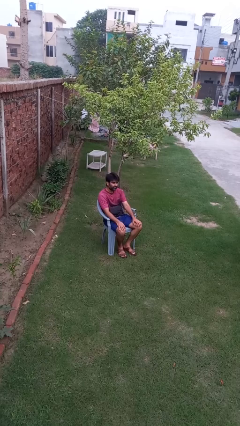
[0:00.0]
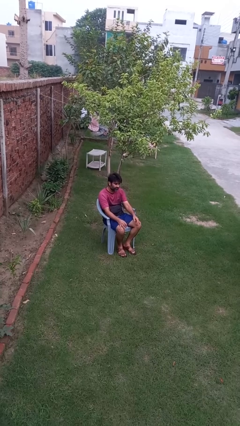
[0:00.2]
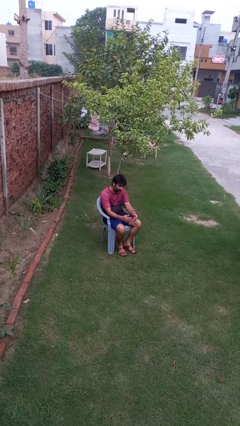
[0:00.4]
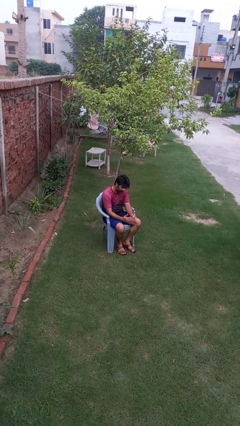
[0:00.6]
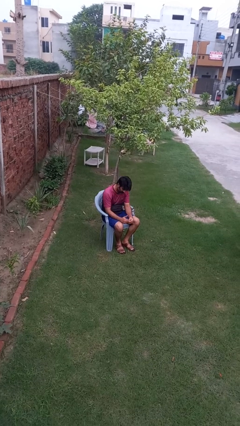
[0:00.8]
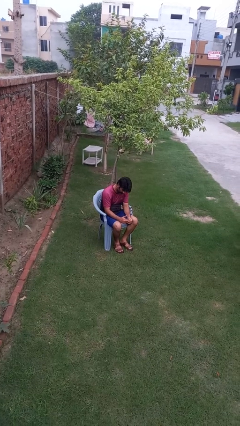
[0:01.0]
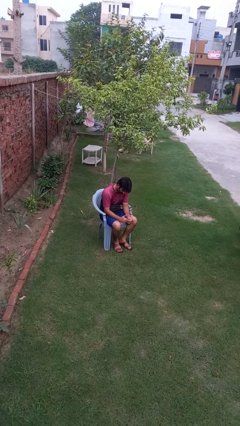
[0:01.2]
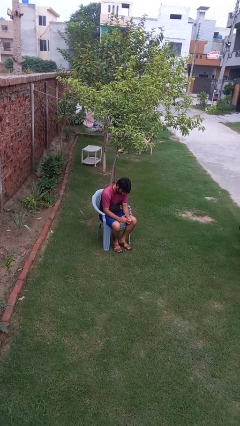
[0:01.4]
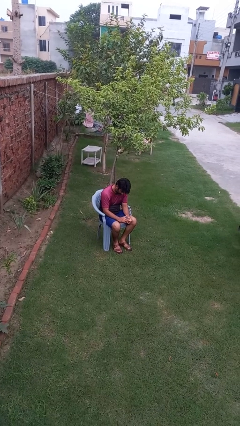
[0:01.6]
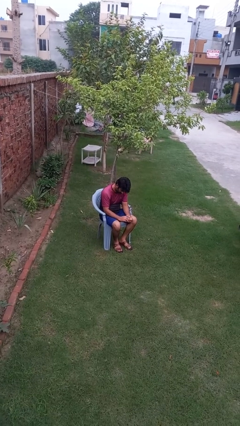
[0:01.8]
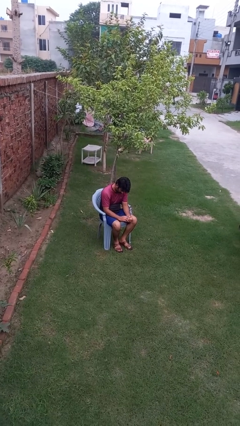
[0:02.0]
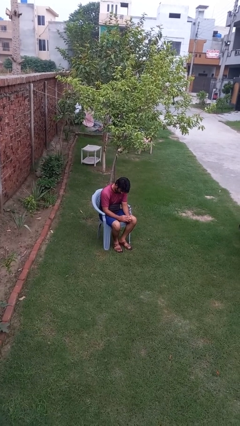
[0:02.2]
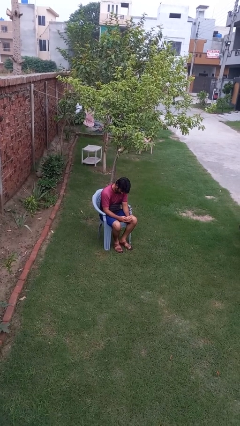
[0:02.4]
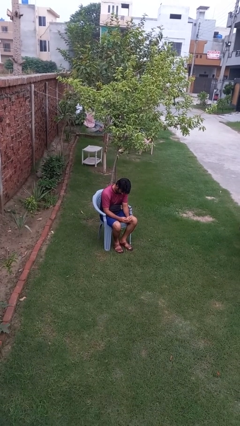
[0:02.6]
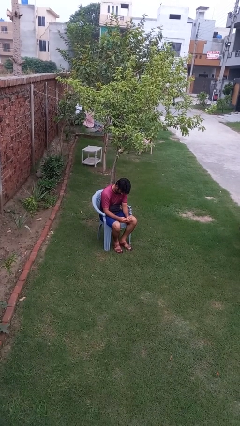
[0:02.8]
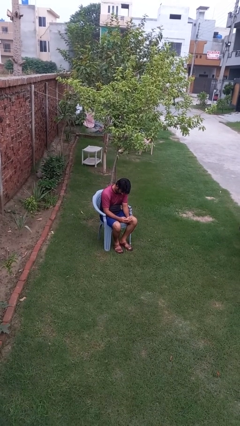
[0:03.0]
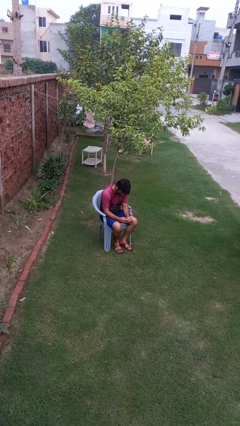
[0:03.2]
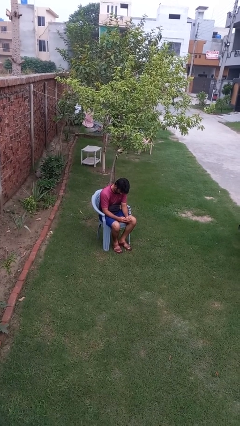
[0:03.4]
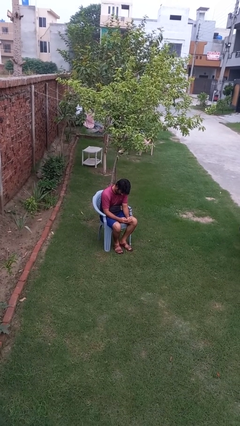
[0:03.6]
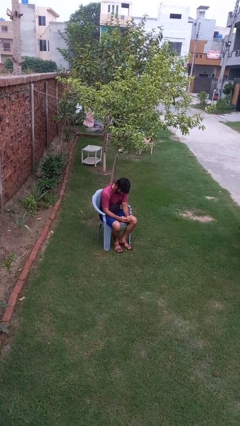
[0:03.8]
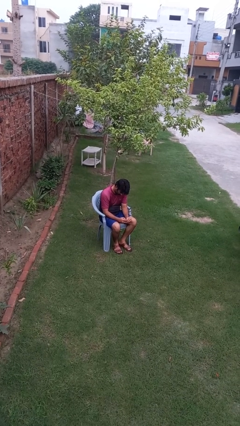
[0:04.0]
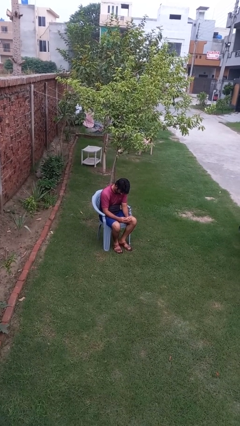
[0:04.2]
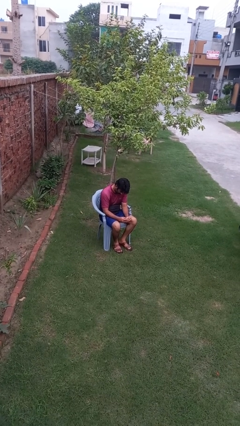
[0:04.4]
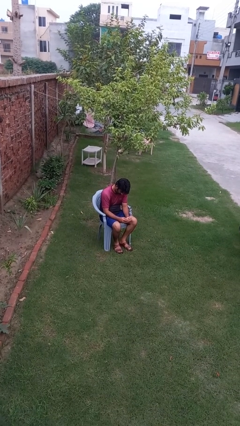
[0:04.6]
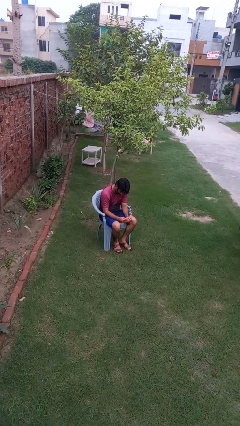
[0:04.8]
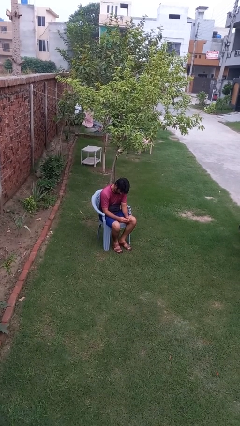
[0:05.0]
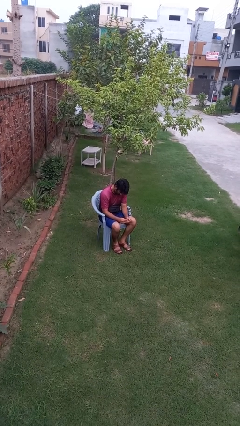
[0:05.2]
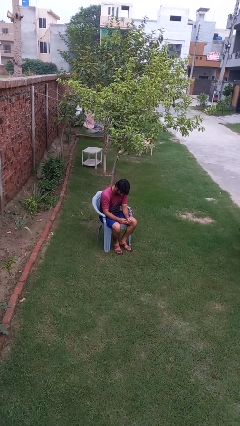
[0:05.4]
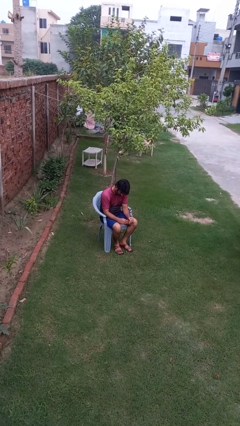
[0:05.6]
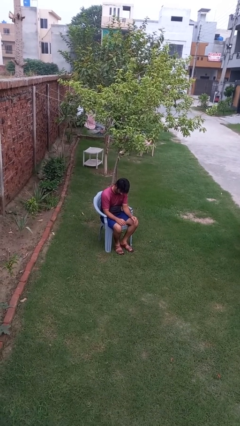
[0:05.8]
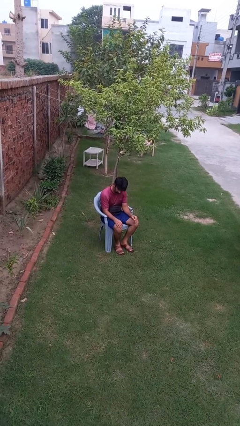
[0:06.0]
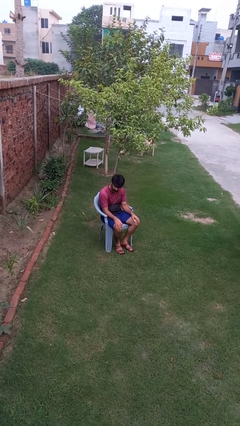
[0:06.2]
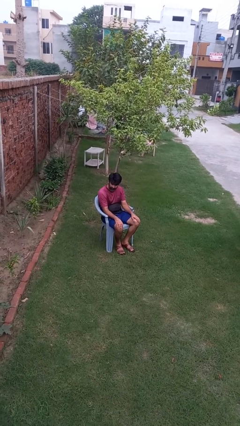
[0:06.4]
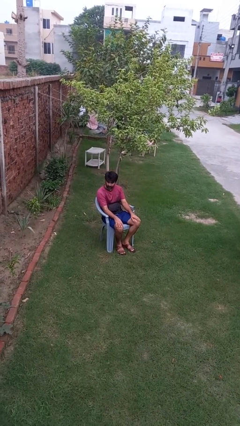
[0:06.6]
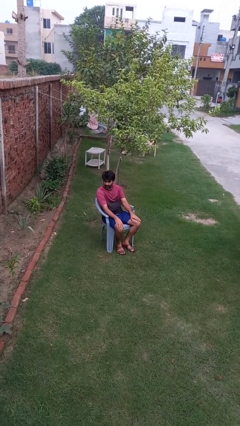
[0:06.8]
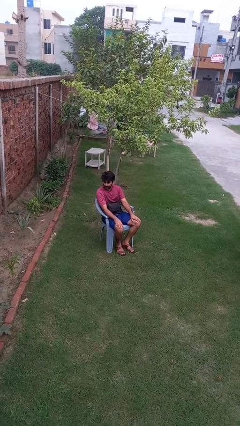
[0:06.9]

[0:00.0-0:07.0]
person looks at hands in lap

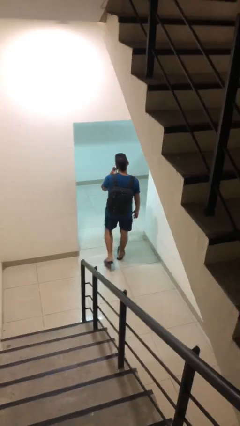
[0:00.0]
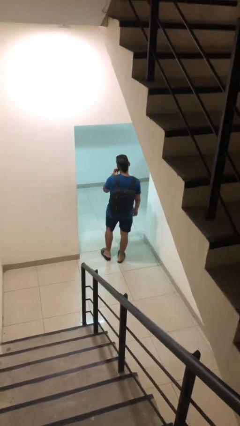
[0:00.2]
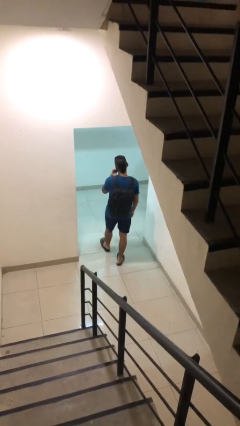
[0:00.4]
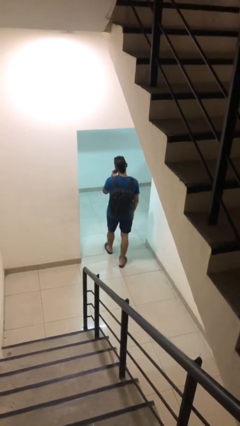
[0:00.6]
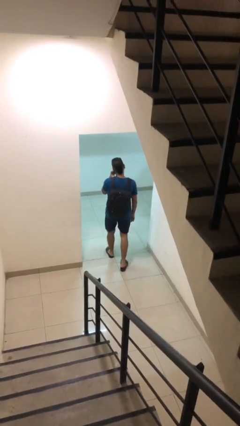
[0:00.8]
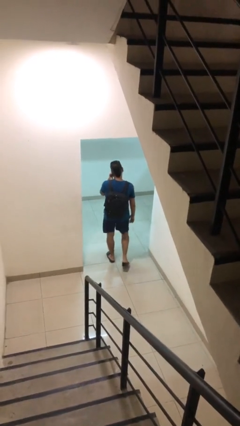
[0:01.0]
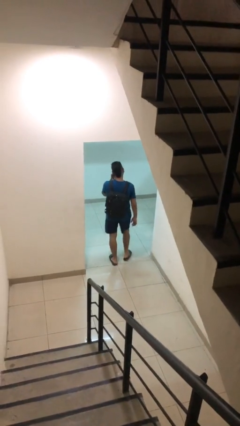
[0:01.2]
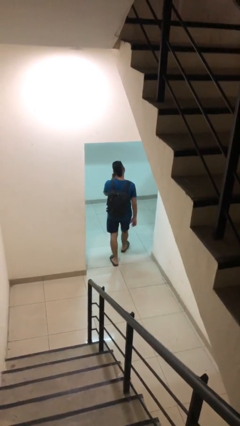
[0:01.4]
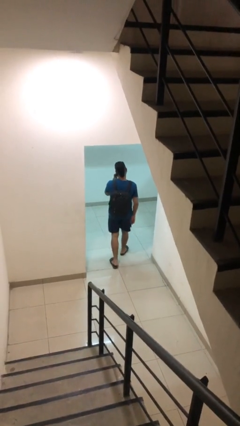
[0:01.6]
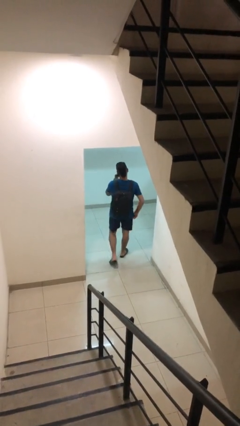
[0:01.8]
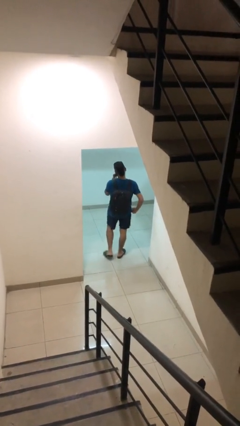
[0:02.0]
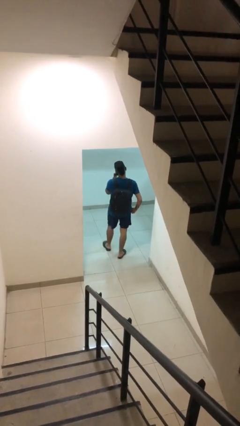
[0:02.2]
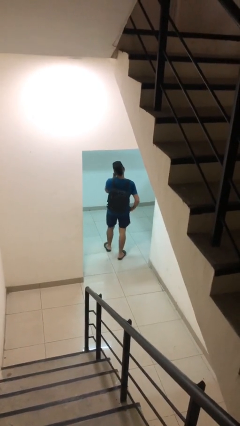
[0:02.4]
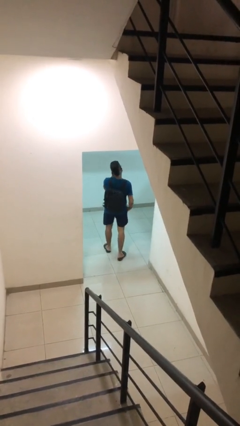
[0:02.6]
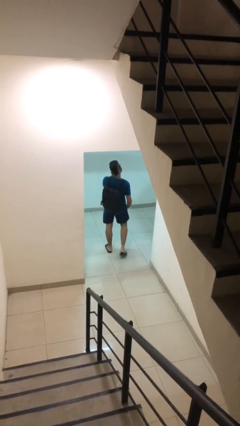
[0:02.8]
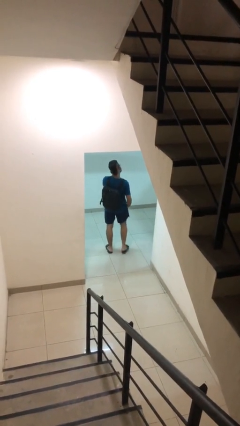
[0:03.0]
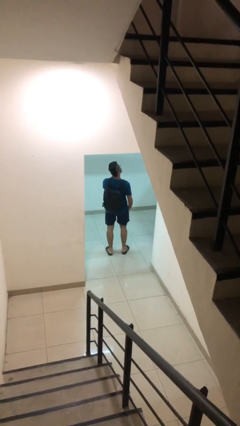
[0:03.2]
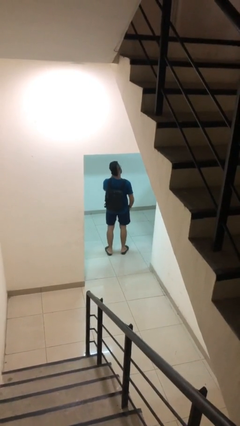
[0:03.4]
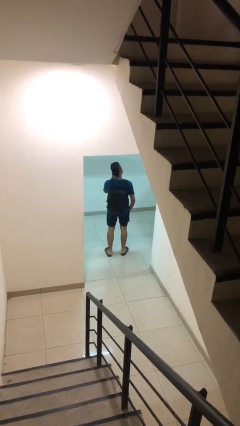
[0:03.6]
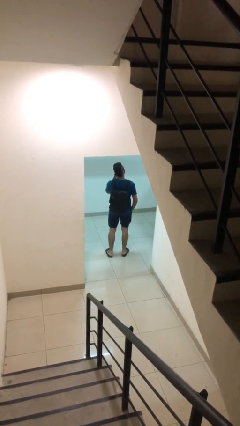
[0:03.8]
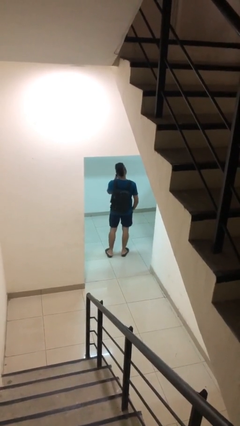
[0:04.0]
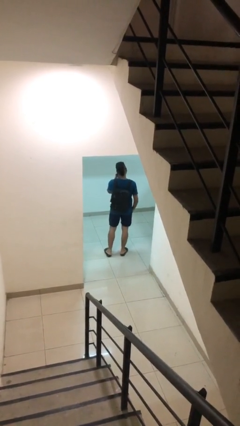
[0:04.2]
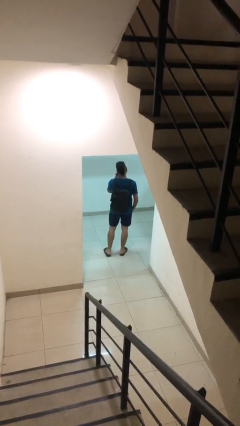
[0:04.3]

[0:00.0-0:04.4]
person exits scene through structure

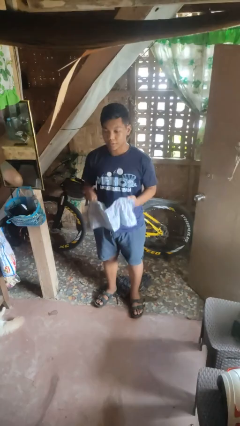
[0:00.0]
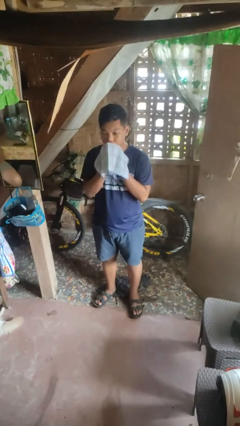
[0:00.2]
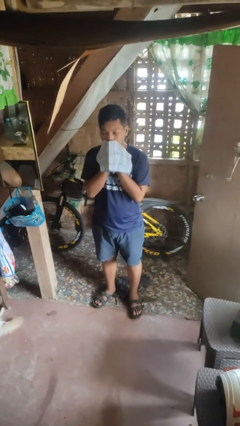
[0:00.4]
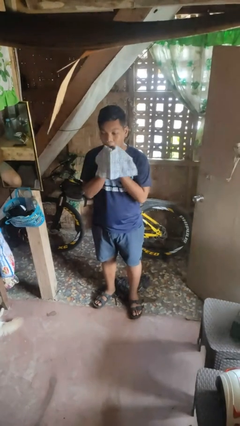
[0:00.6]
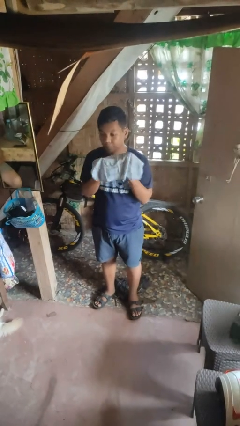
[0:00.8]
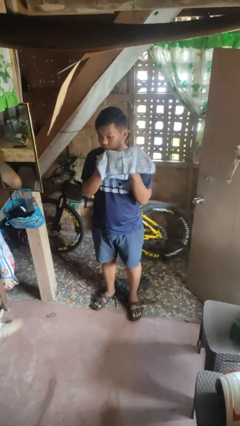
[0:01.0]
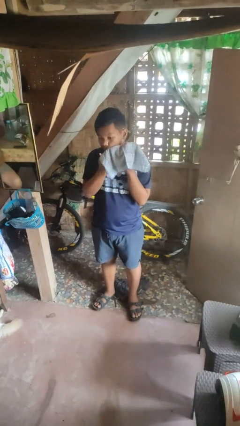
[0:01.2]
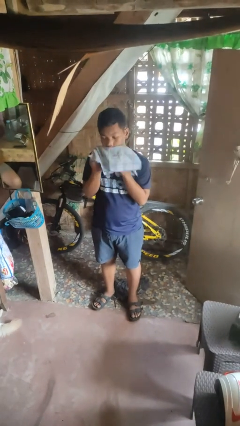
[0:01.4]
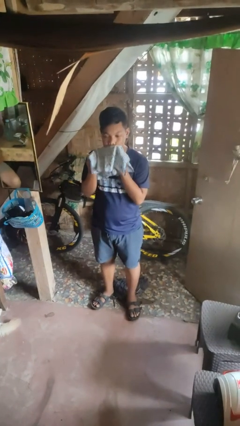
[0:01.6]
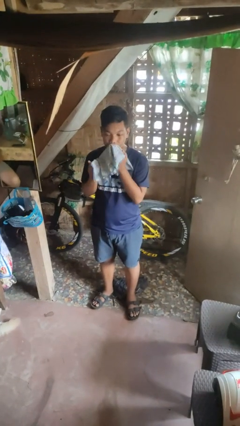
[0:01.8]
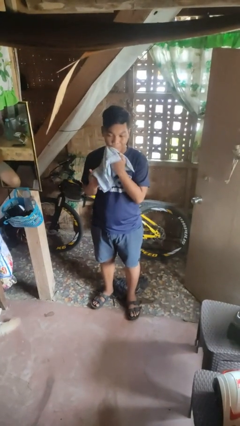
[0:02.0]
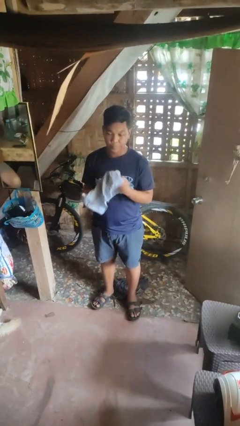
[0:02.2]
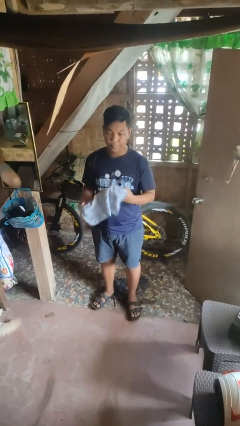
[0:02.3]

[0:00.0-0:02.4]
person wipes mouth with napkin

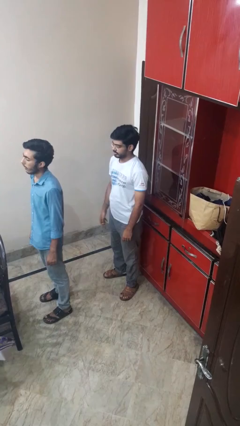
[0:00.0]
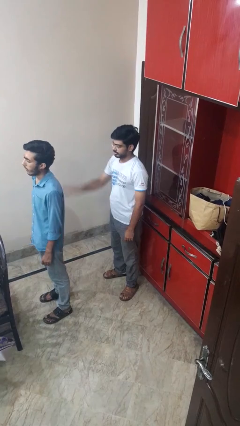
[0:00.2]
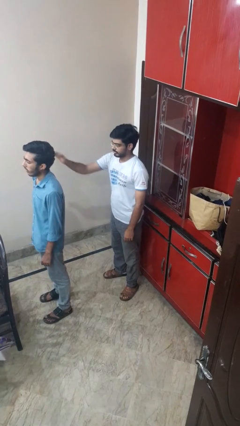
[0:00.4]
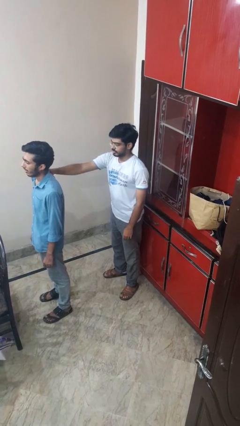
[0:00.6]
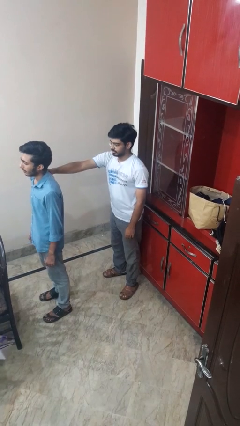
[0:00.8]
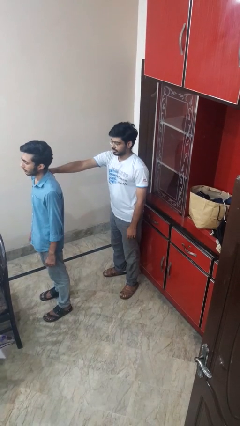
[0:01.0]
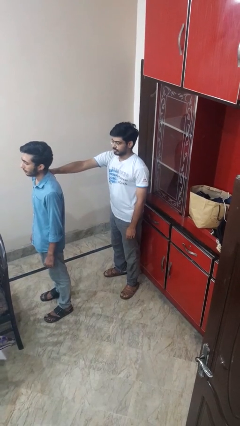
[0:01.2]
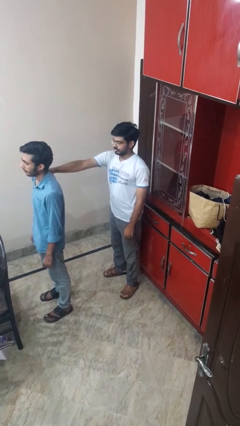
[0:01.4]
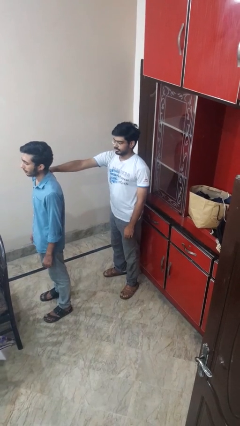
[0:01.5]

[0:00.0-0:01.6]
person grabs person by shoulder

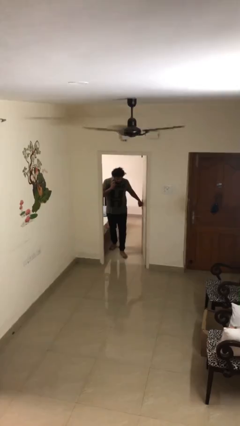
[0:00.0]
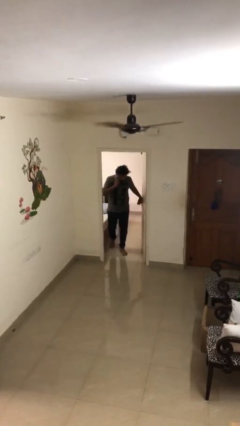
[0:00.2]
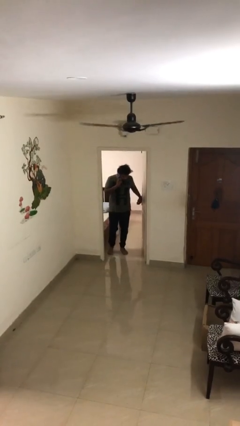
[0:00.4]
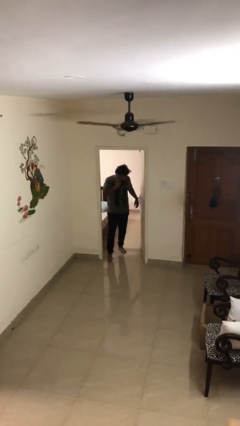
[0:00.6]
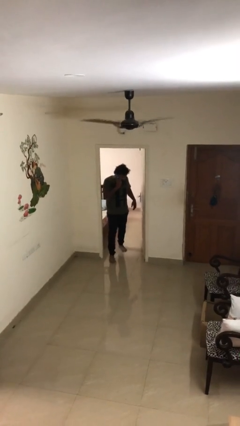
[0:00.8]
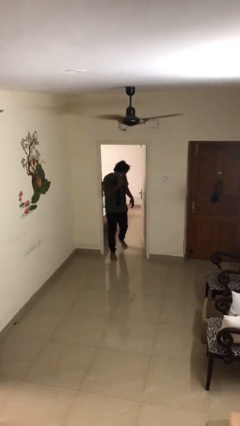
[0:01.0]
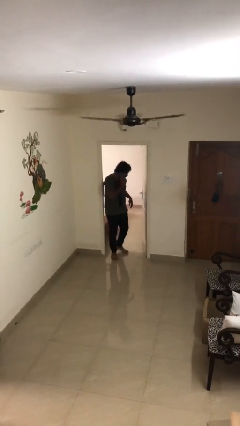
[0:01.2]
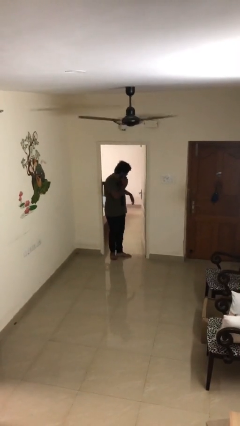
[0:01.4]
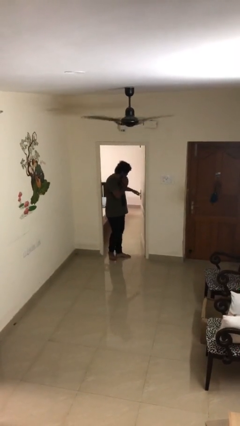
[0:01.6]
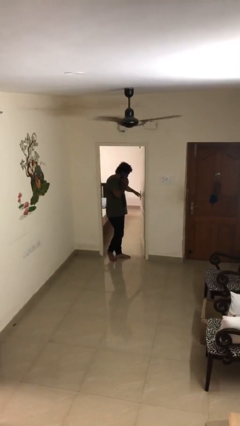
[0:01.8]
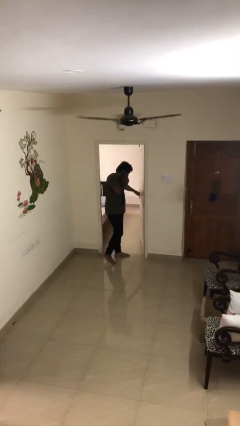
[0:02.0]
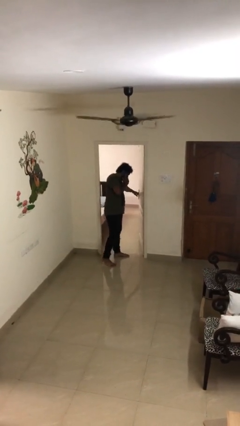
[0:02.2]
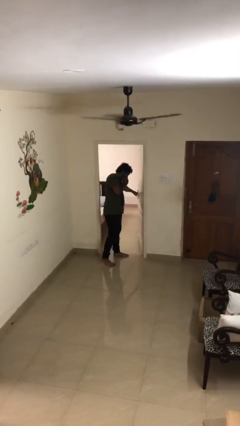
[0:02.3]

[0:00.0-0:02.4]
person enters scene through structure

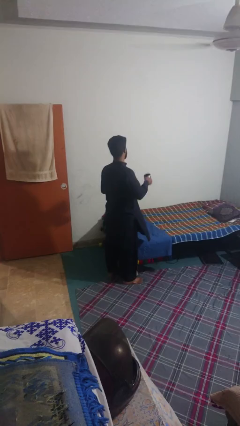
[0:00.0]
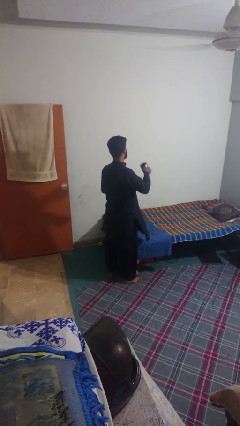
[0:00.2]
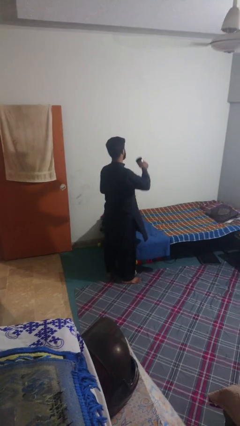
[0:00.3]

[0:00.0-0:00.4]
person stirs mug
